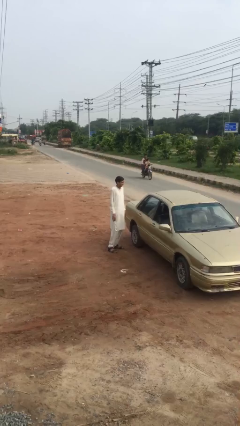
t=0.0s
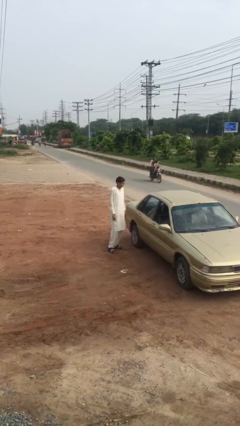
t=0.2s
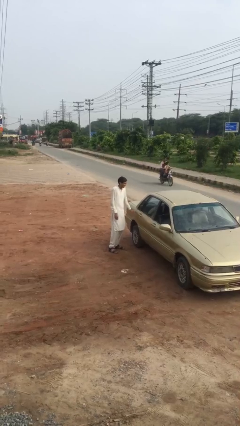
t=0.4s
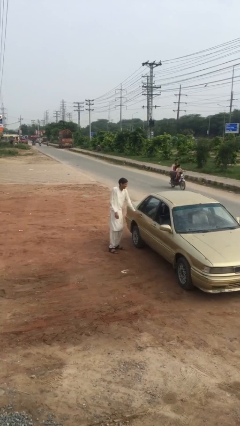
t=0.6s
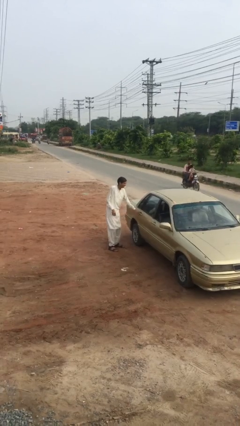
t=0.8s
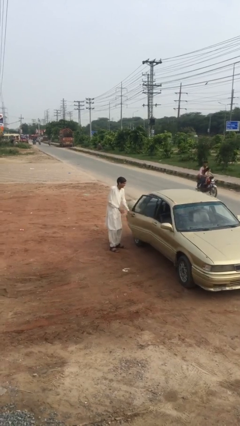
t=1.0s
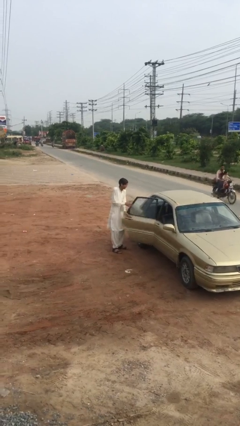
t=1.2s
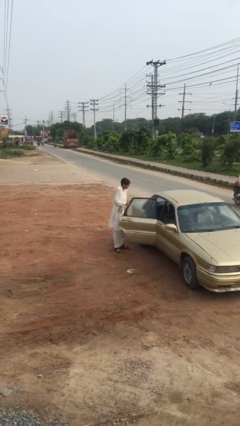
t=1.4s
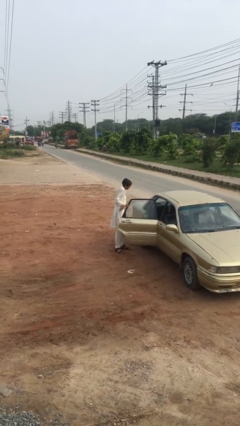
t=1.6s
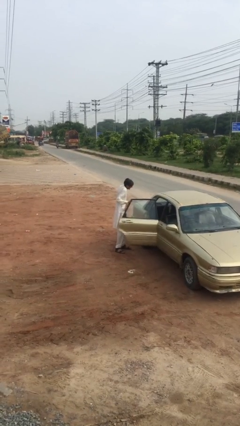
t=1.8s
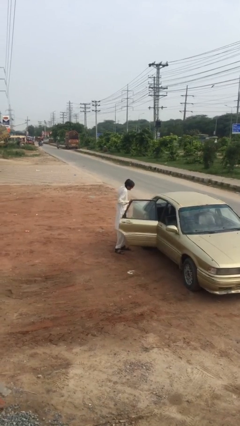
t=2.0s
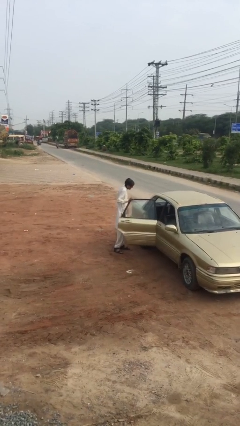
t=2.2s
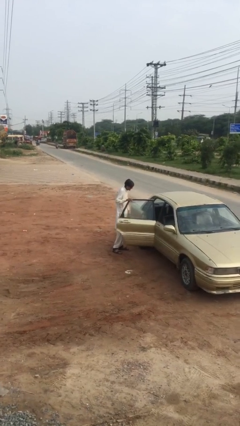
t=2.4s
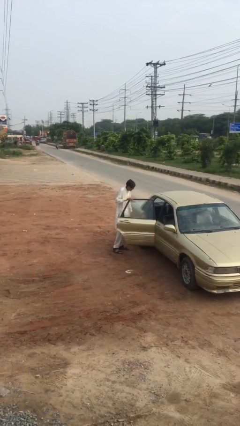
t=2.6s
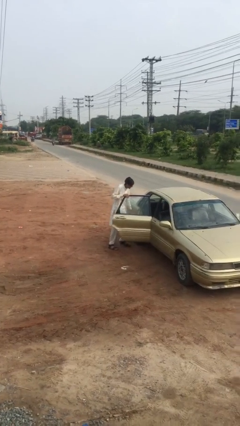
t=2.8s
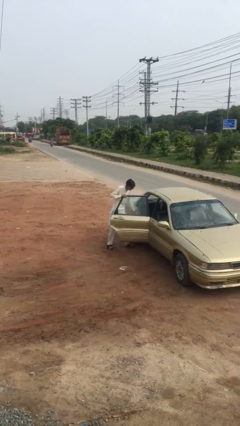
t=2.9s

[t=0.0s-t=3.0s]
person opens car door

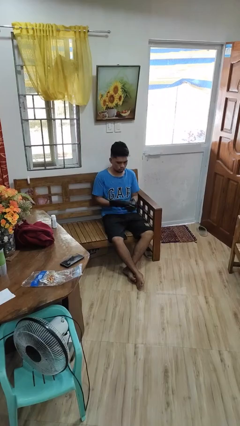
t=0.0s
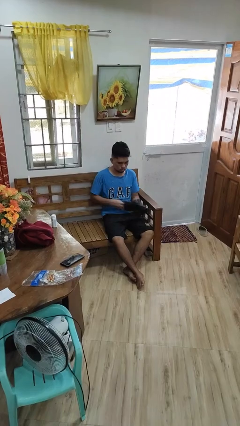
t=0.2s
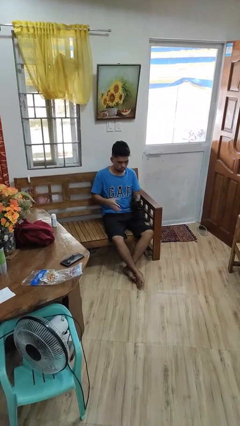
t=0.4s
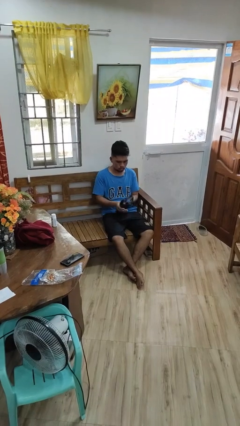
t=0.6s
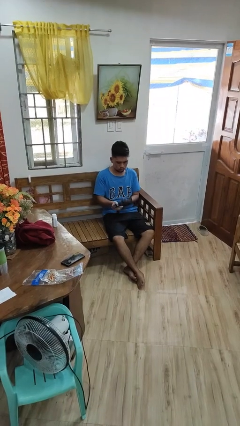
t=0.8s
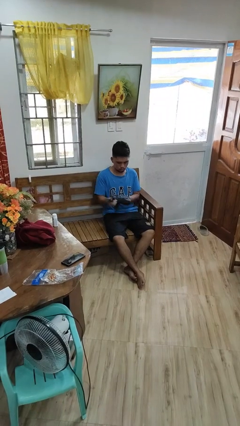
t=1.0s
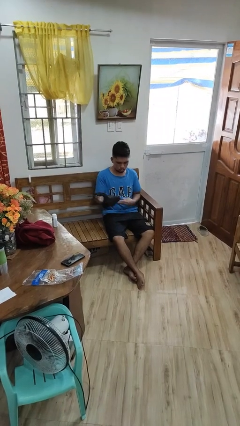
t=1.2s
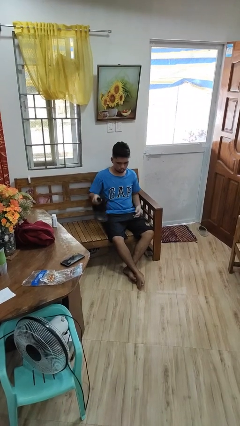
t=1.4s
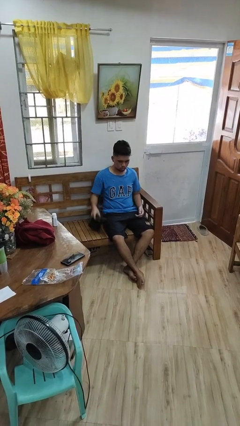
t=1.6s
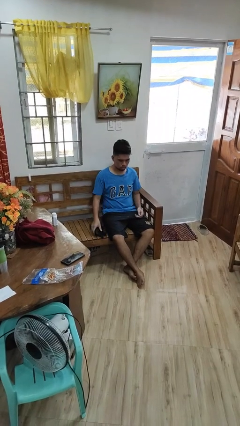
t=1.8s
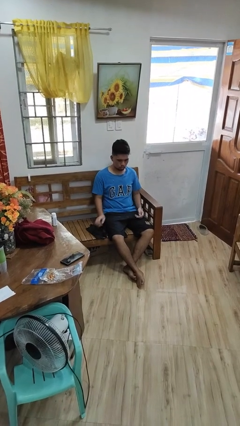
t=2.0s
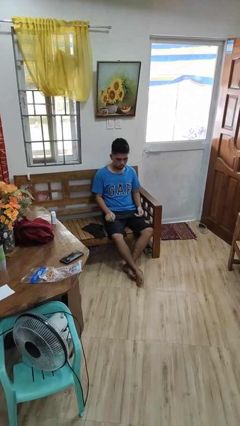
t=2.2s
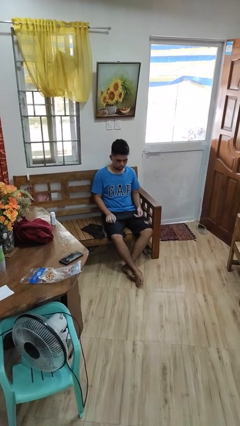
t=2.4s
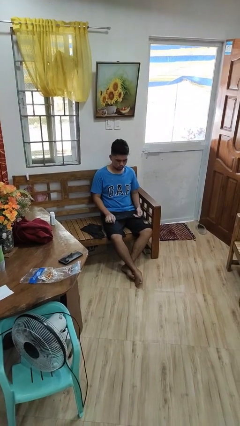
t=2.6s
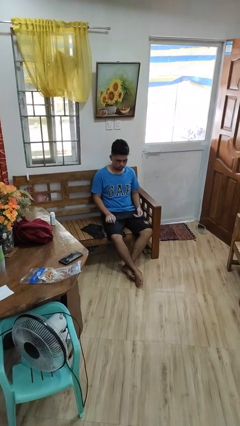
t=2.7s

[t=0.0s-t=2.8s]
person takes off gloves

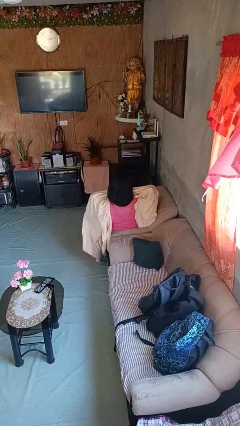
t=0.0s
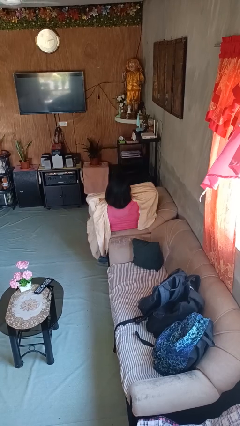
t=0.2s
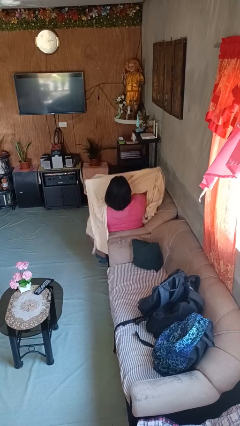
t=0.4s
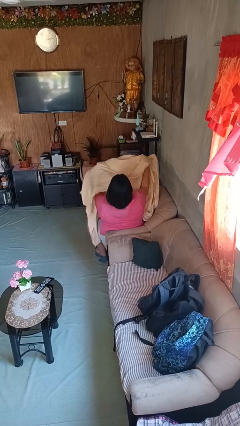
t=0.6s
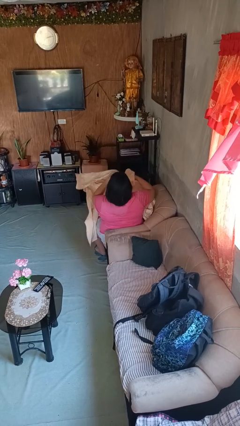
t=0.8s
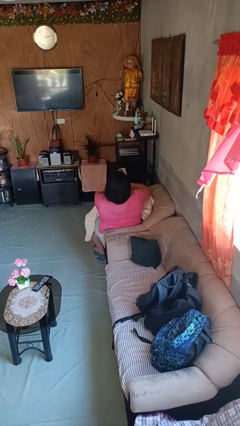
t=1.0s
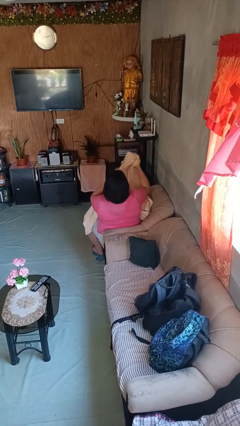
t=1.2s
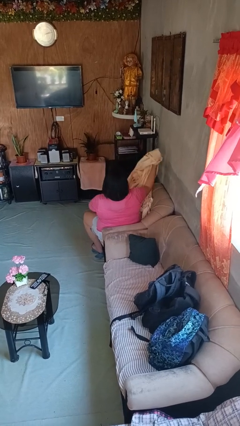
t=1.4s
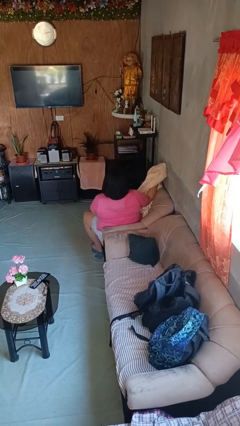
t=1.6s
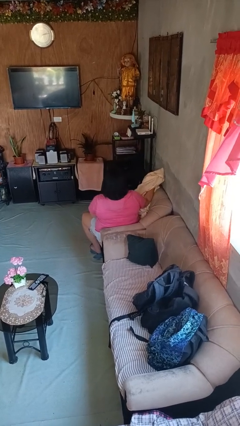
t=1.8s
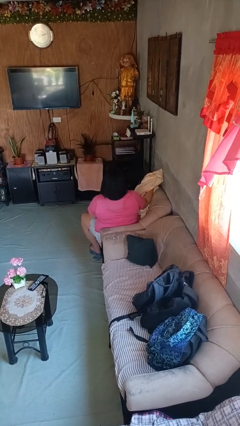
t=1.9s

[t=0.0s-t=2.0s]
person uncovers with blanket

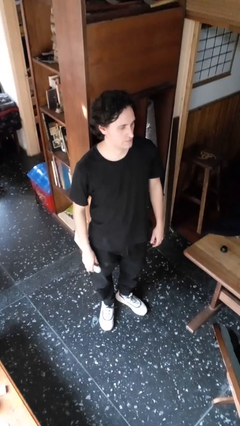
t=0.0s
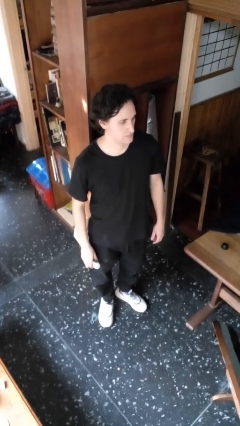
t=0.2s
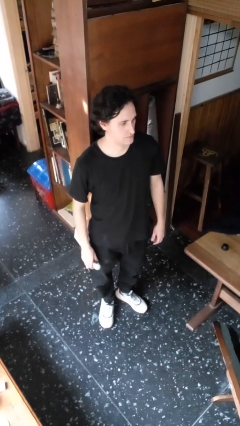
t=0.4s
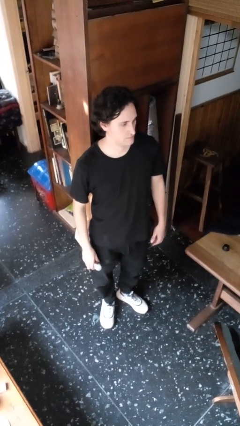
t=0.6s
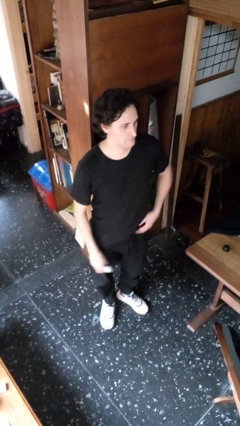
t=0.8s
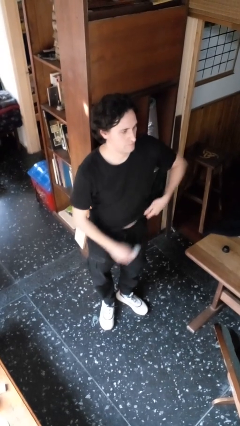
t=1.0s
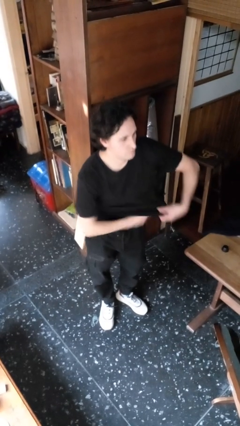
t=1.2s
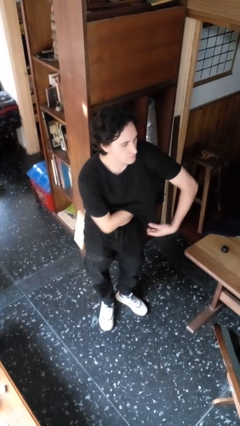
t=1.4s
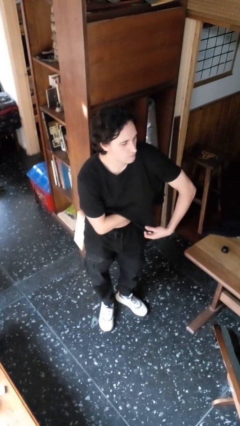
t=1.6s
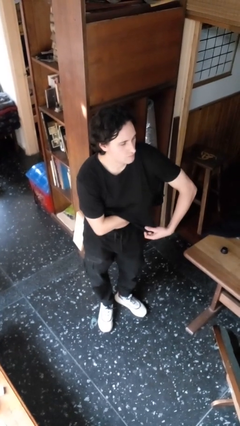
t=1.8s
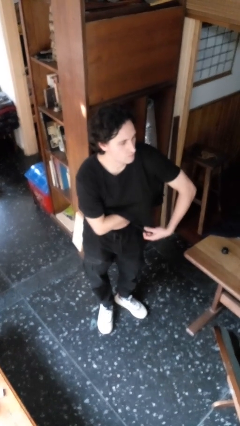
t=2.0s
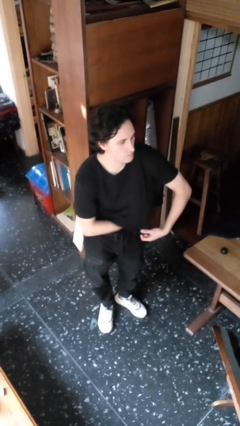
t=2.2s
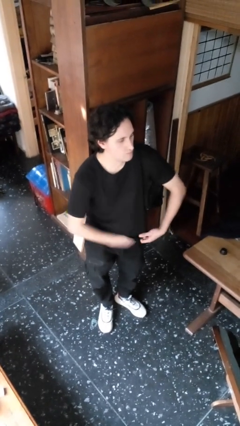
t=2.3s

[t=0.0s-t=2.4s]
person applies deodorant

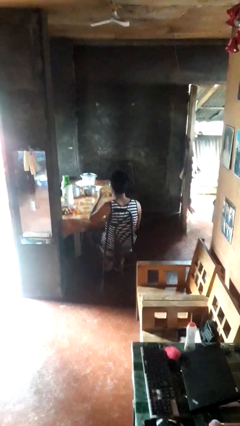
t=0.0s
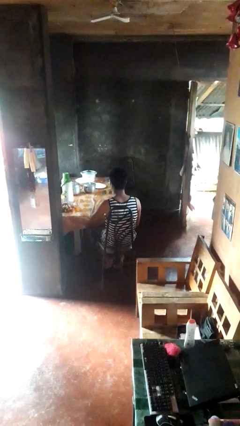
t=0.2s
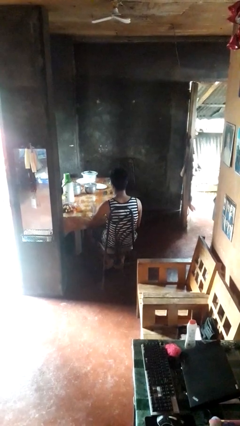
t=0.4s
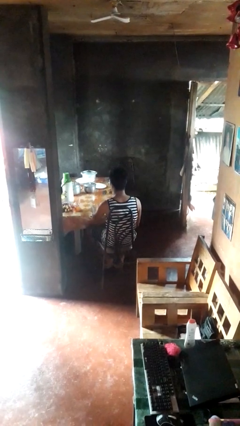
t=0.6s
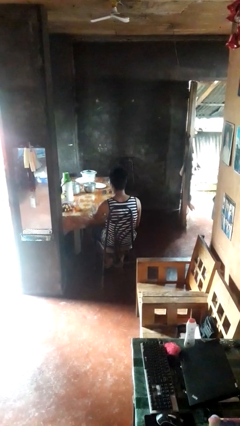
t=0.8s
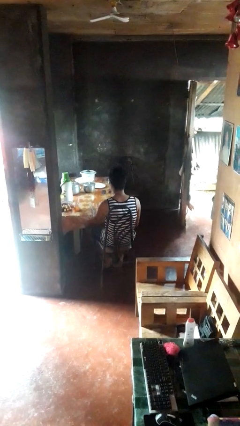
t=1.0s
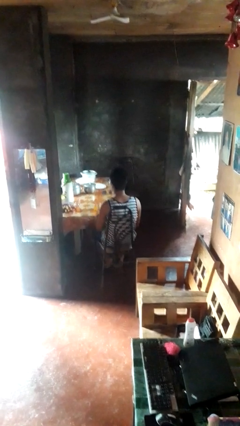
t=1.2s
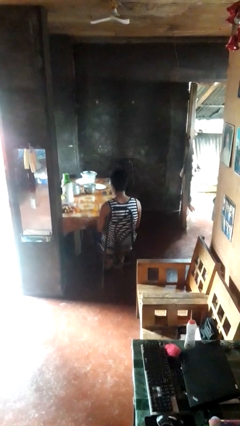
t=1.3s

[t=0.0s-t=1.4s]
person puts down object on table

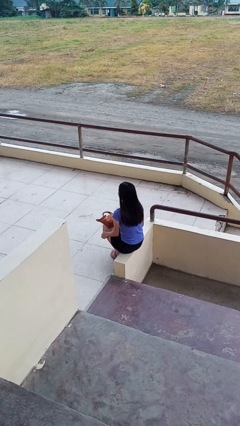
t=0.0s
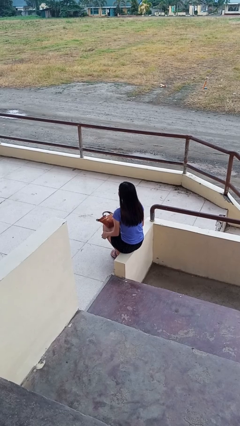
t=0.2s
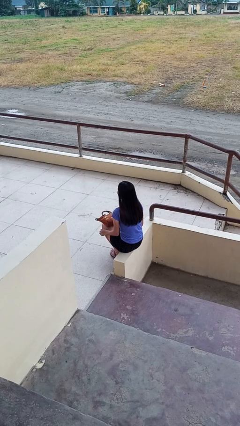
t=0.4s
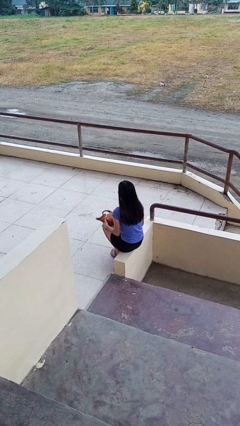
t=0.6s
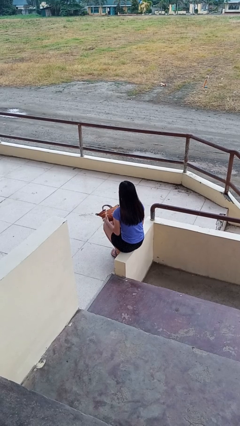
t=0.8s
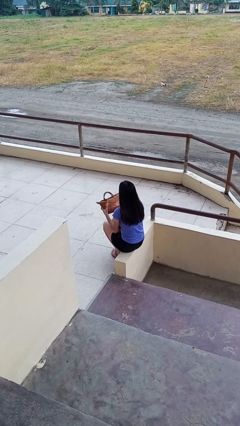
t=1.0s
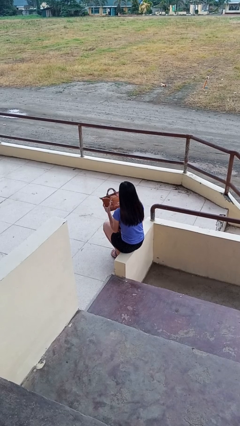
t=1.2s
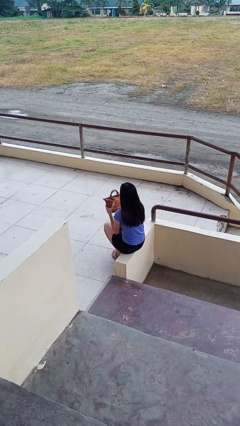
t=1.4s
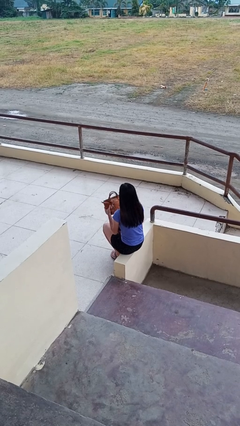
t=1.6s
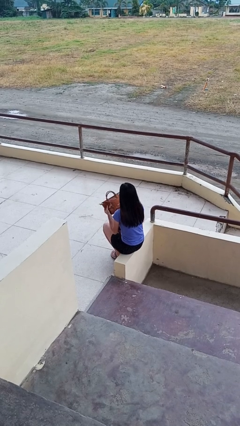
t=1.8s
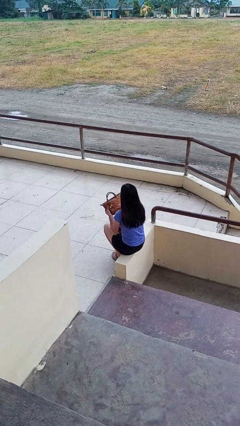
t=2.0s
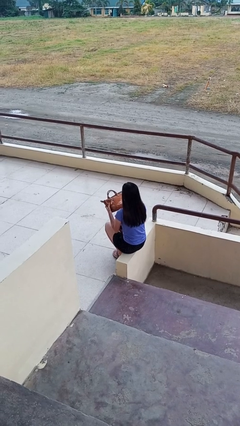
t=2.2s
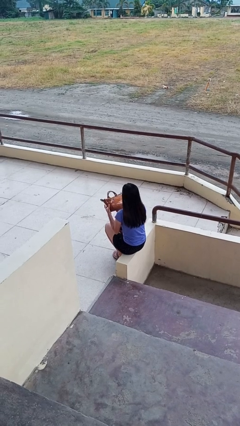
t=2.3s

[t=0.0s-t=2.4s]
person taps object with finger

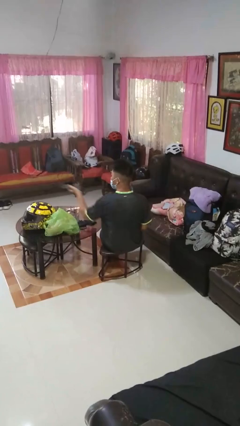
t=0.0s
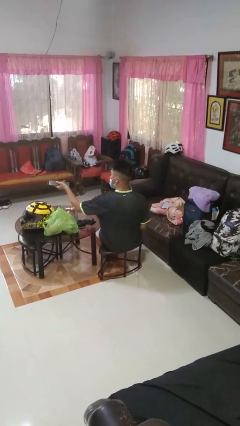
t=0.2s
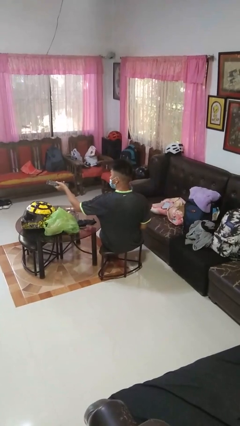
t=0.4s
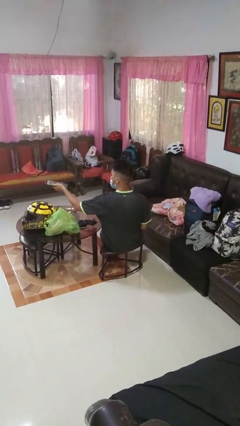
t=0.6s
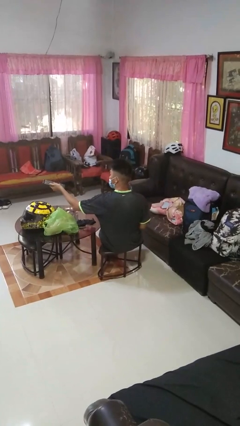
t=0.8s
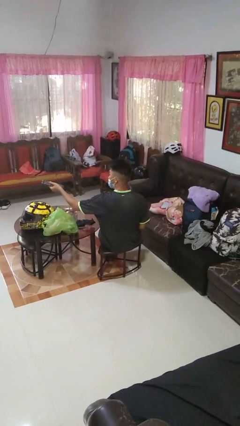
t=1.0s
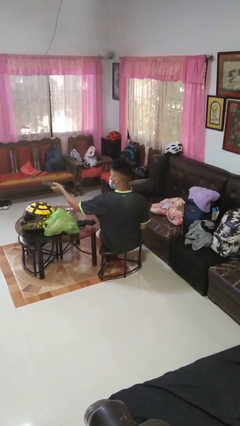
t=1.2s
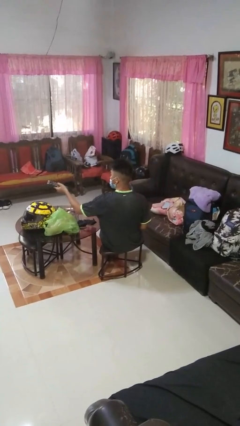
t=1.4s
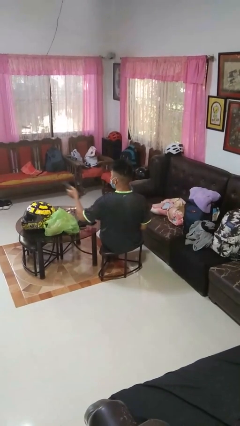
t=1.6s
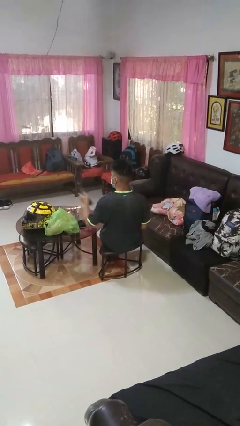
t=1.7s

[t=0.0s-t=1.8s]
person uses television remote

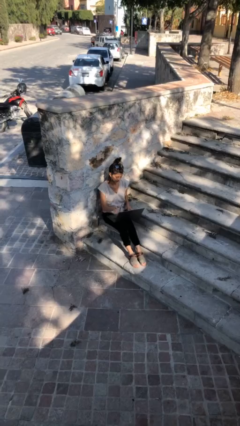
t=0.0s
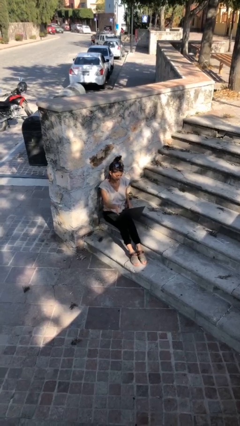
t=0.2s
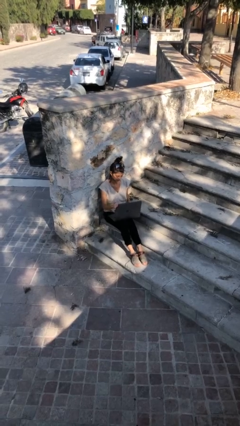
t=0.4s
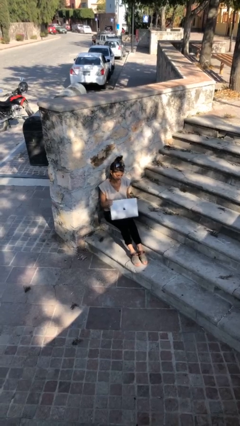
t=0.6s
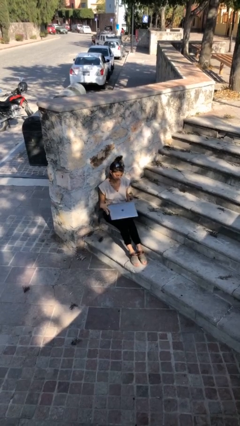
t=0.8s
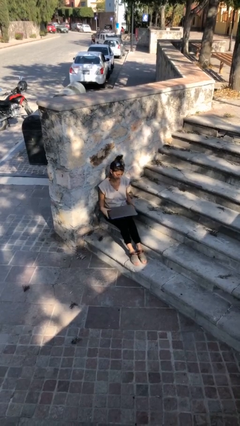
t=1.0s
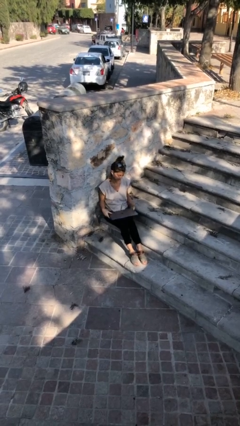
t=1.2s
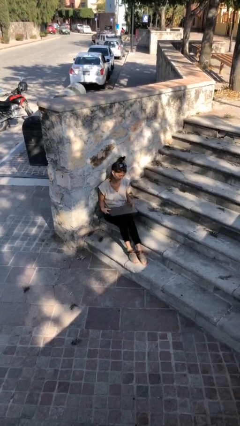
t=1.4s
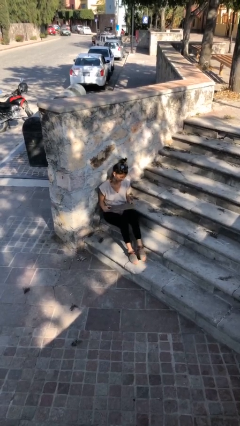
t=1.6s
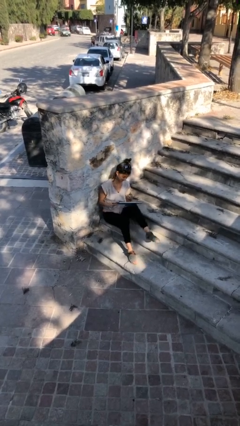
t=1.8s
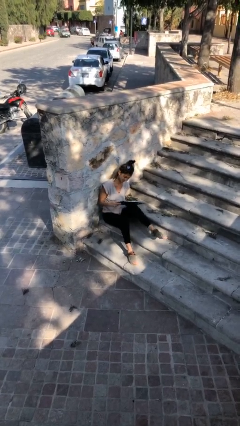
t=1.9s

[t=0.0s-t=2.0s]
person interacts with laptop
